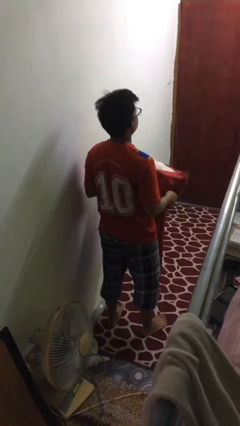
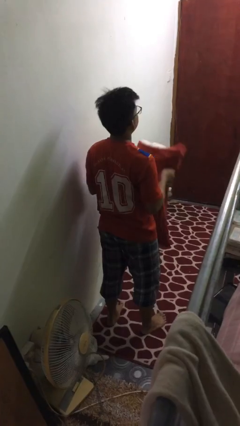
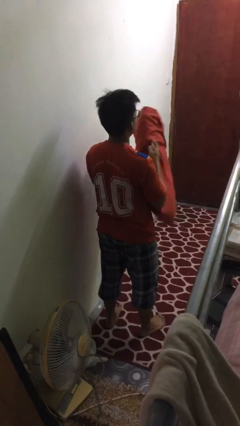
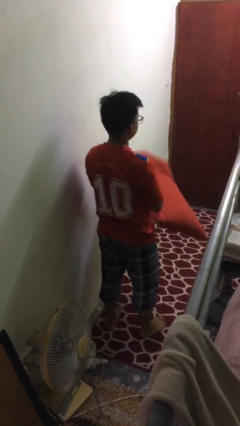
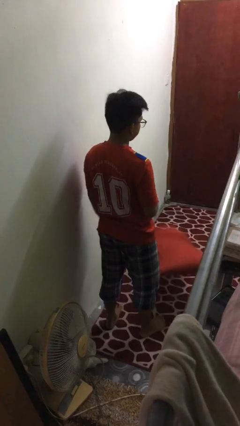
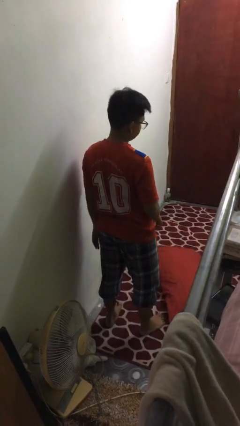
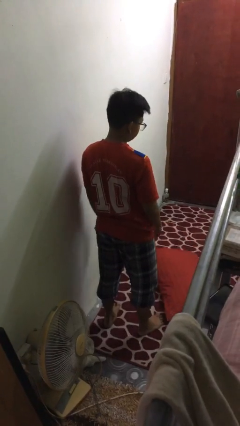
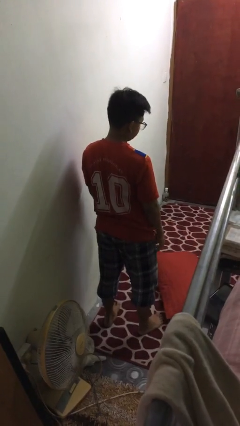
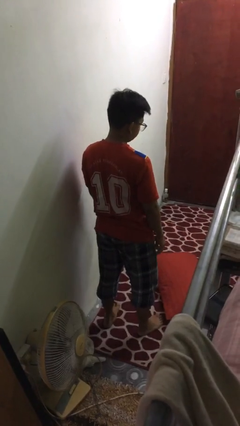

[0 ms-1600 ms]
person drops object

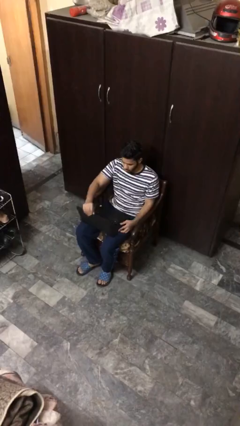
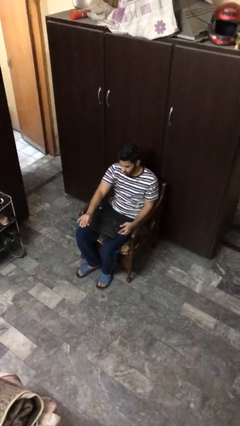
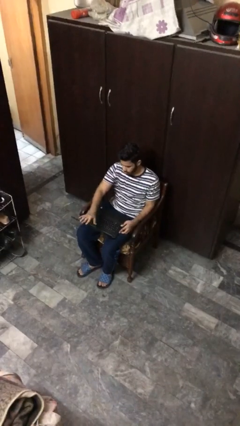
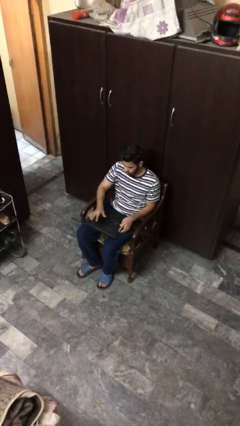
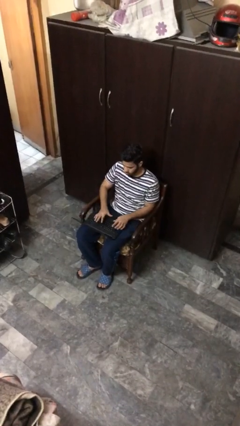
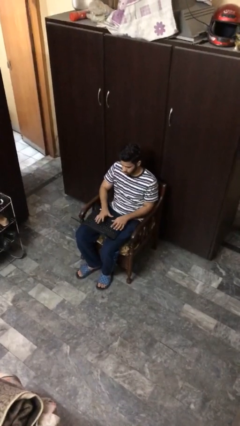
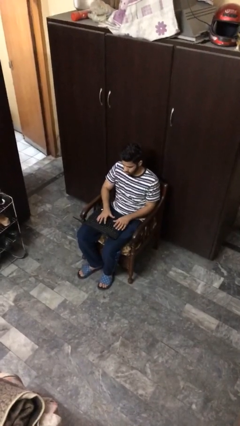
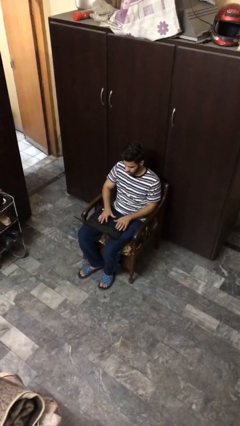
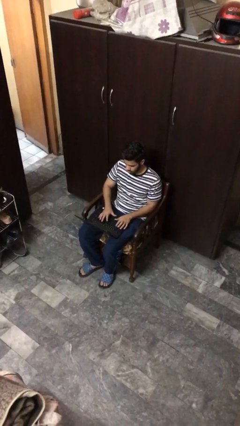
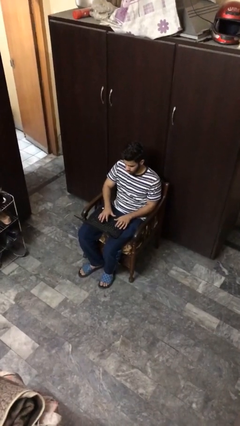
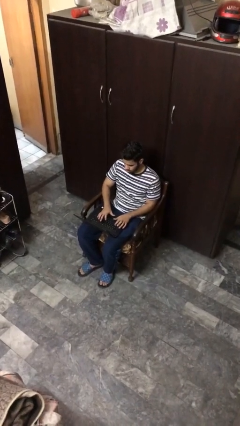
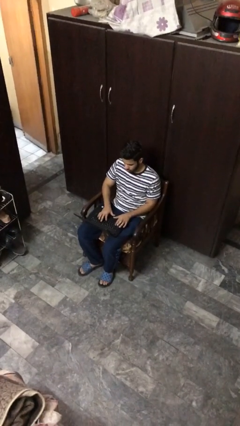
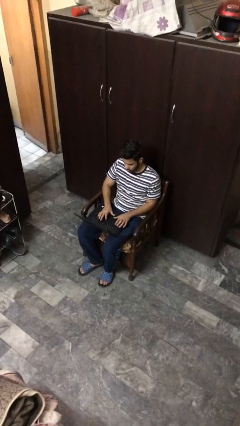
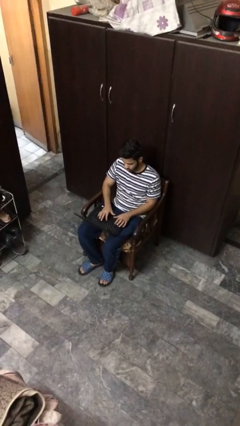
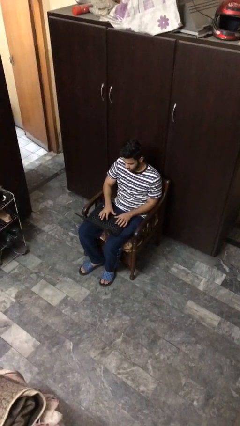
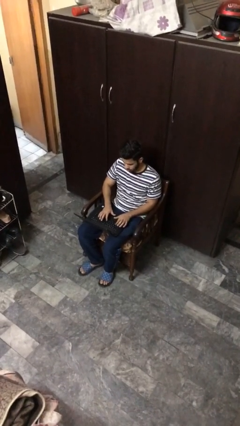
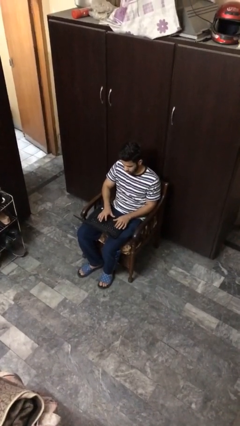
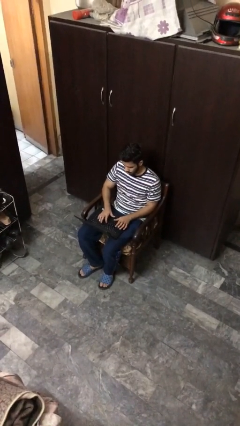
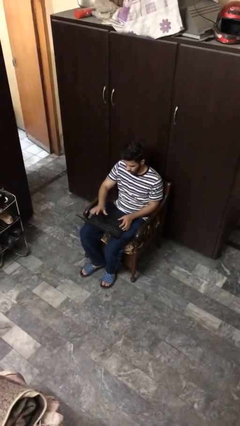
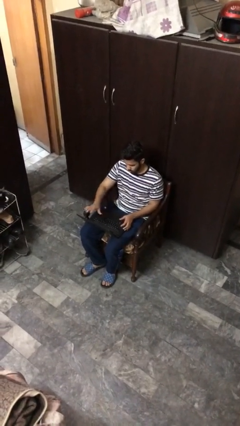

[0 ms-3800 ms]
person interacts with laptop

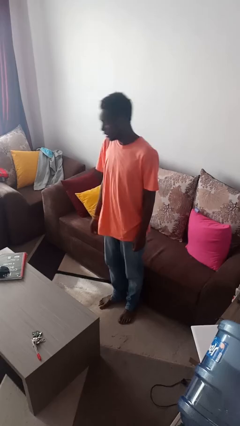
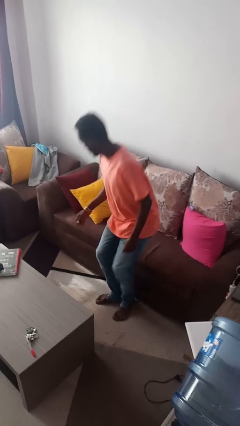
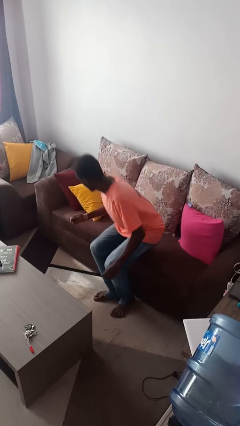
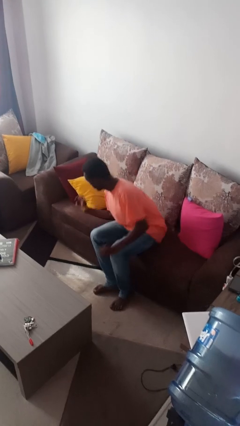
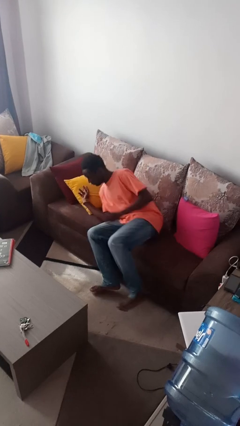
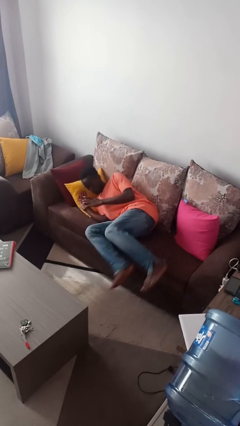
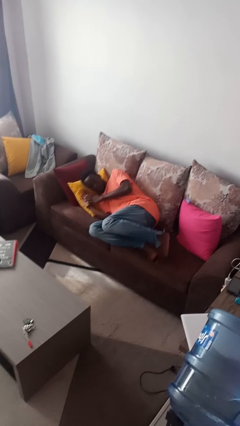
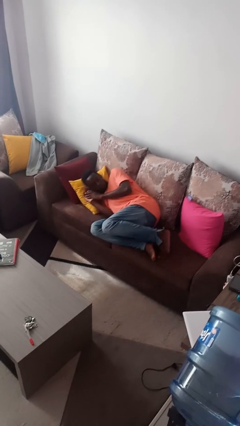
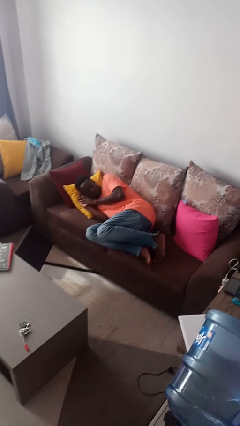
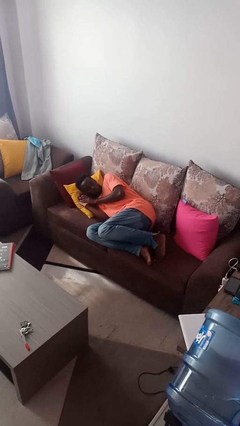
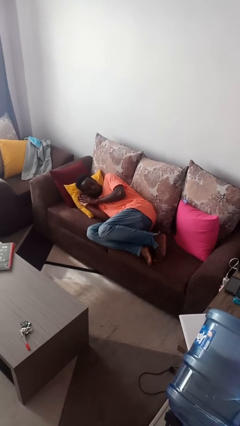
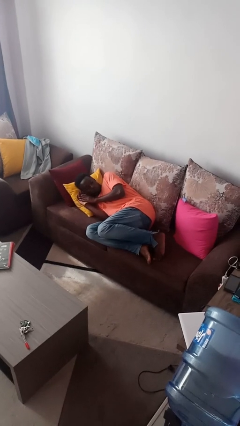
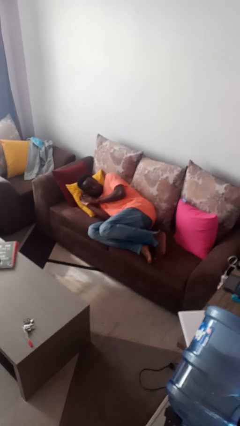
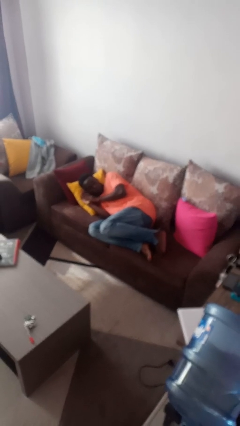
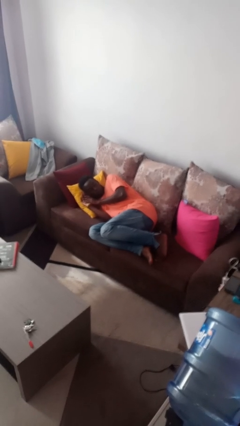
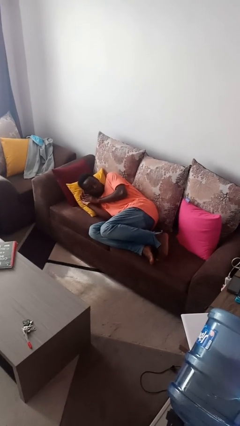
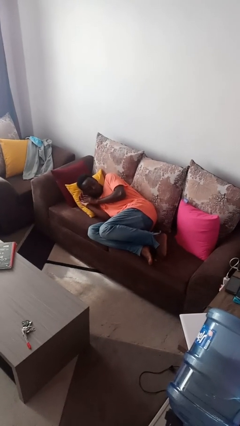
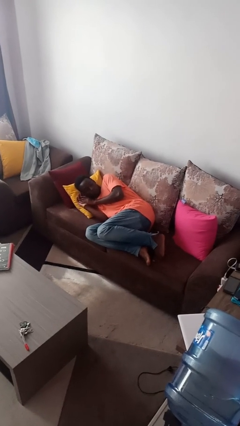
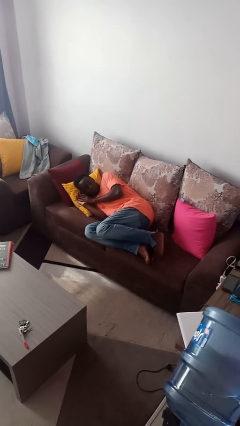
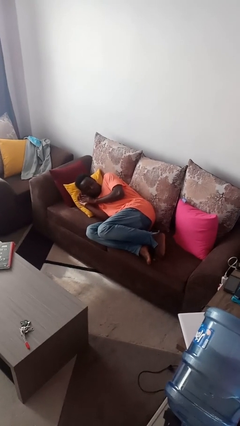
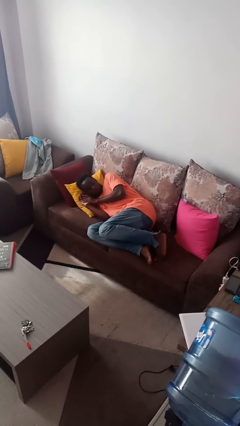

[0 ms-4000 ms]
person lies down on couch

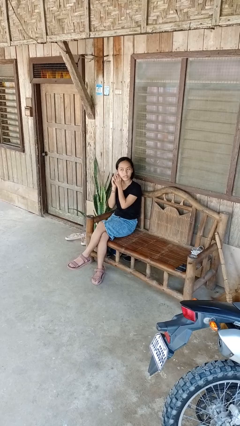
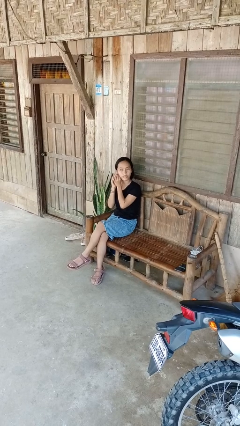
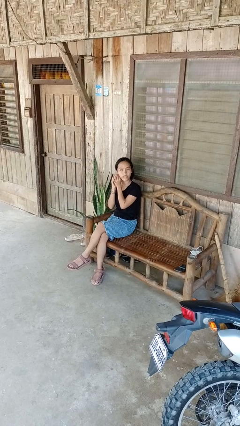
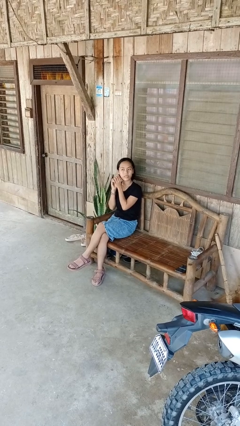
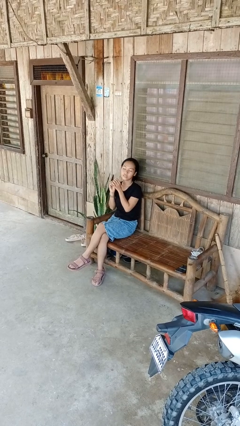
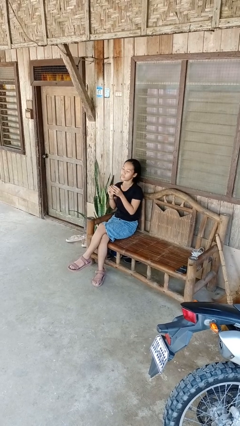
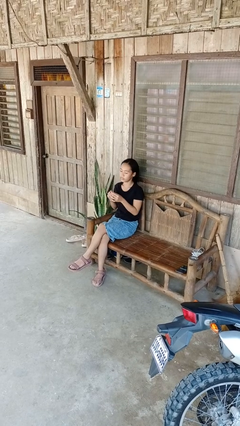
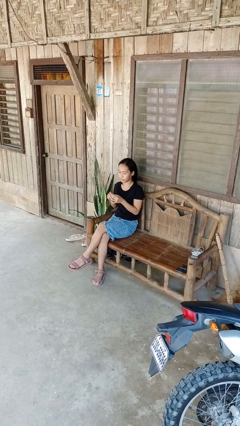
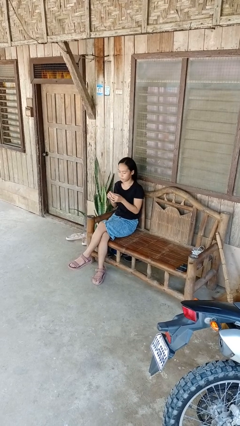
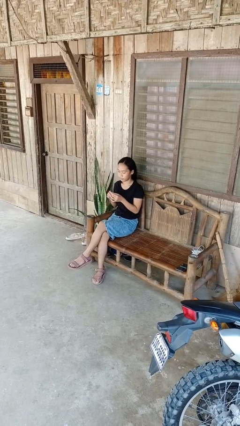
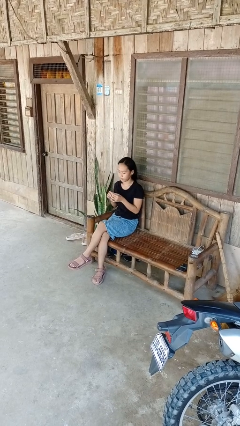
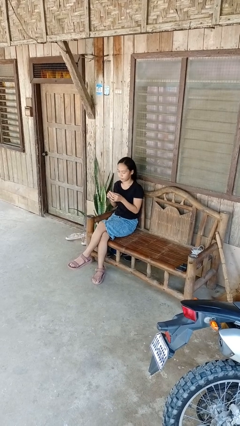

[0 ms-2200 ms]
person takes off earrings

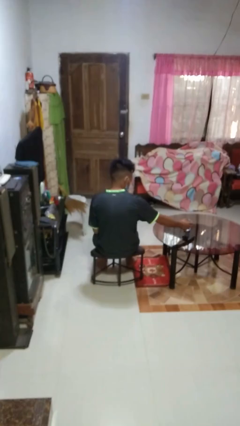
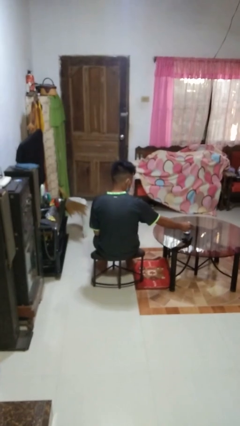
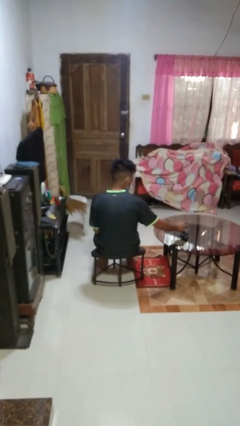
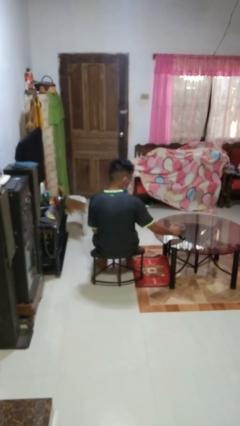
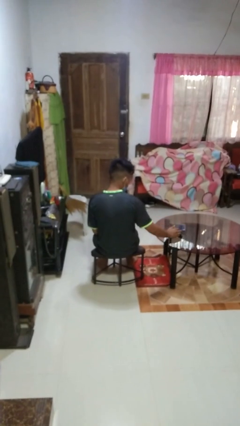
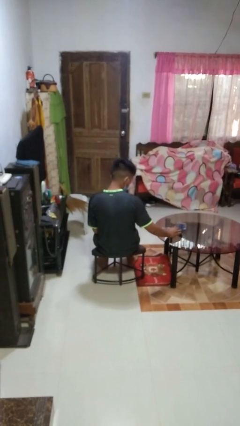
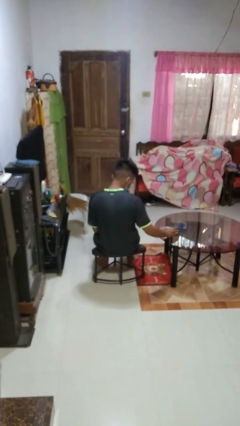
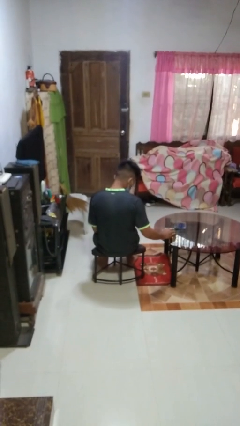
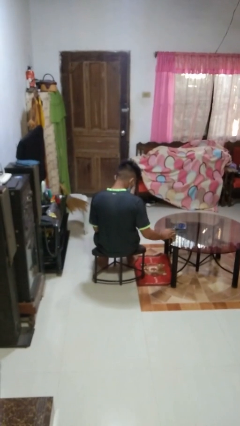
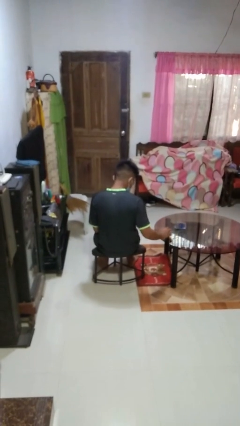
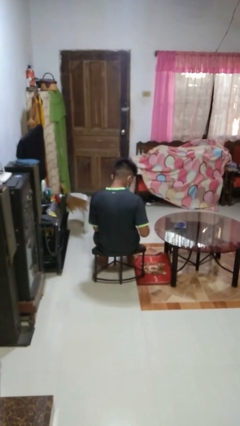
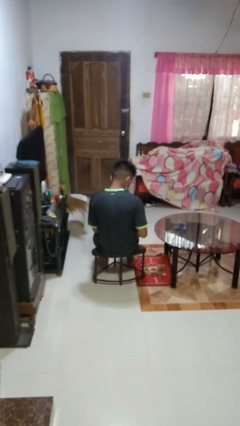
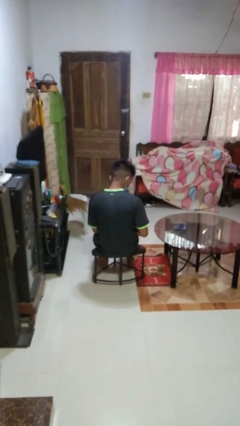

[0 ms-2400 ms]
person spills on table

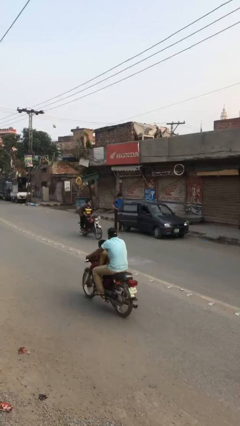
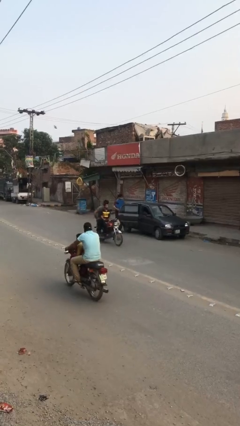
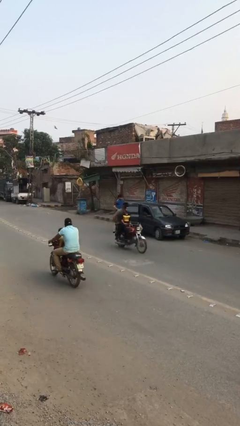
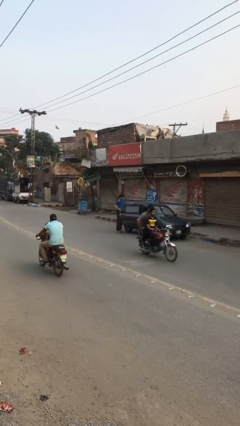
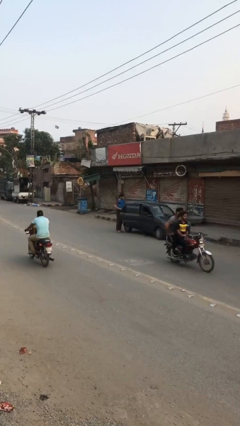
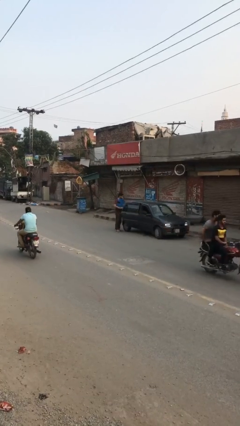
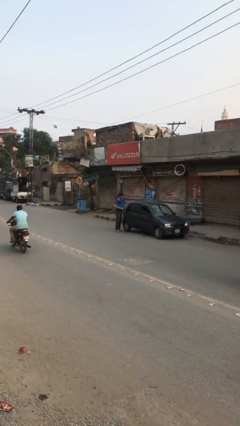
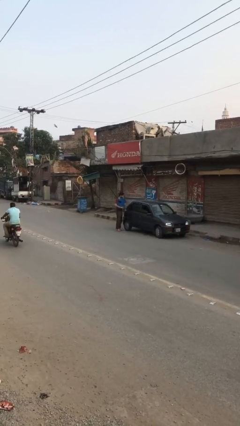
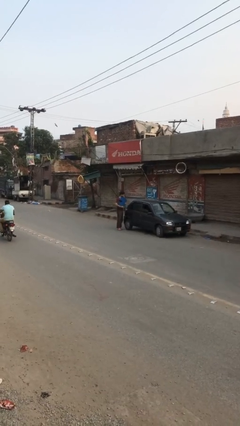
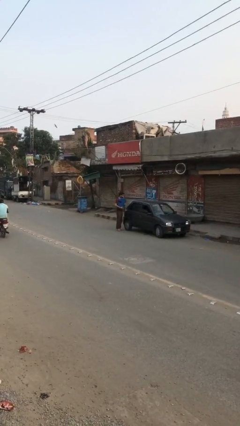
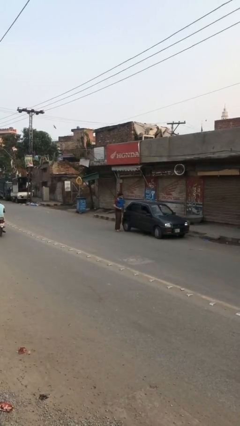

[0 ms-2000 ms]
person closes car door

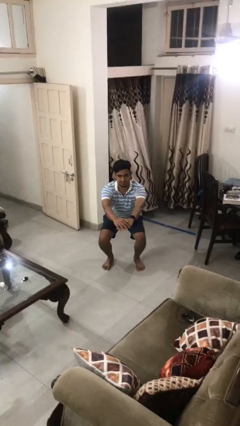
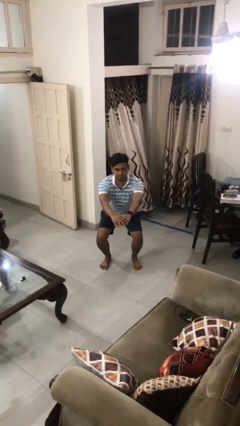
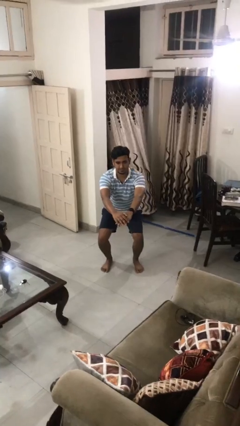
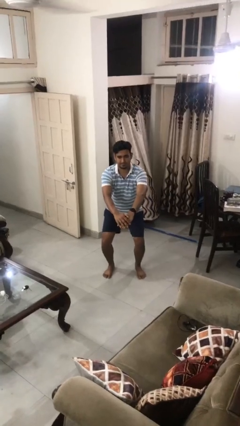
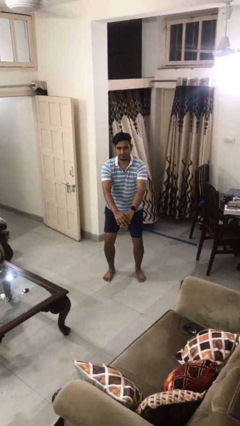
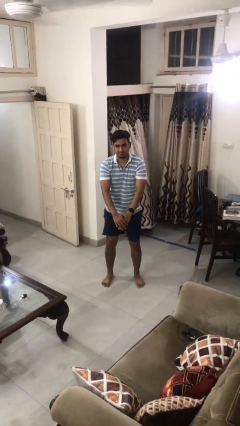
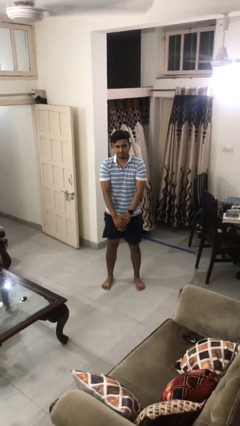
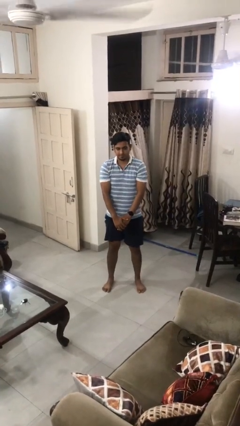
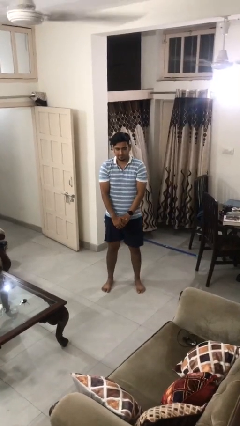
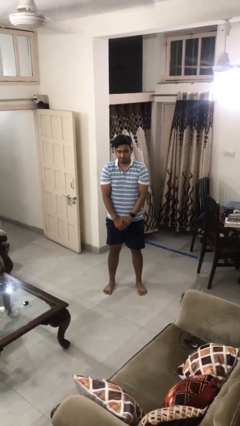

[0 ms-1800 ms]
person stands up
